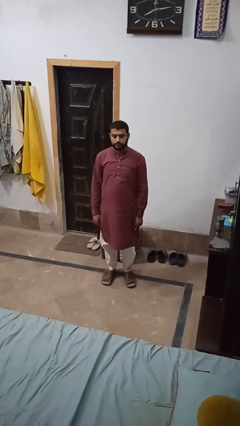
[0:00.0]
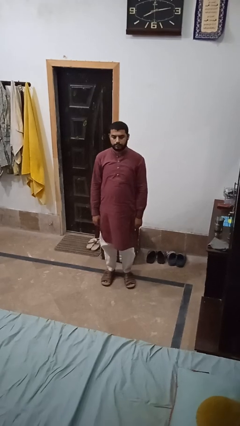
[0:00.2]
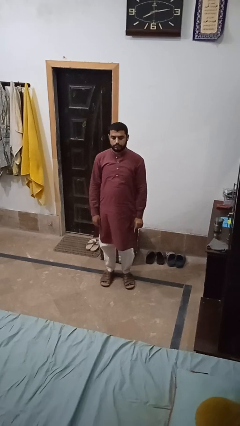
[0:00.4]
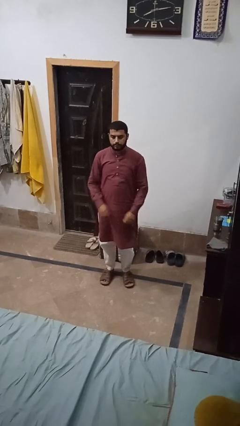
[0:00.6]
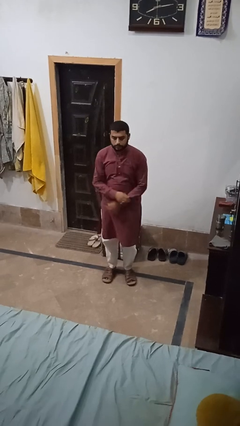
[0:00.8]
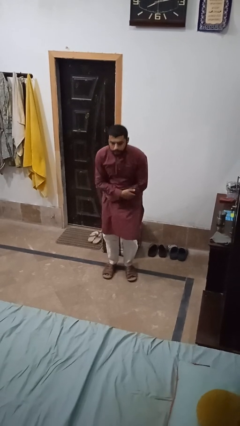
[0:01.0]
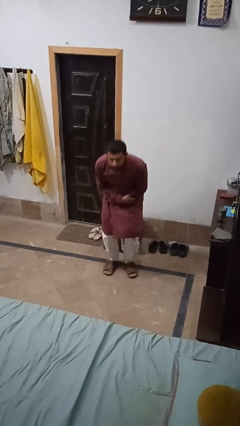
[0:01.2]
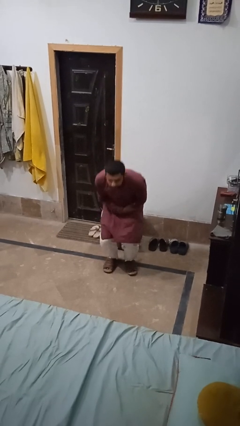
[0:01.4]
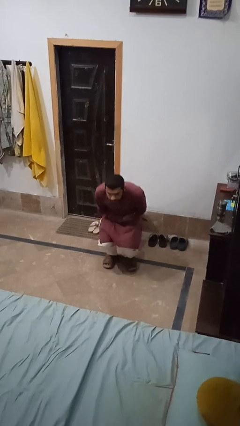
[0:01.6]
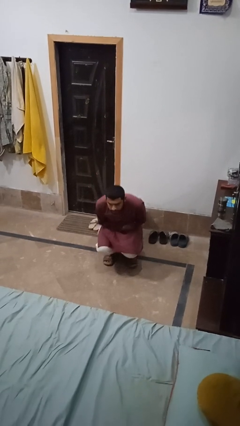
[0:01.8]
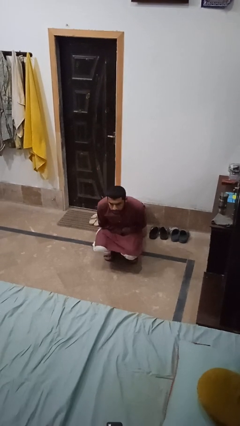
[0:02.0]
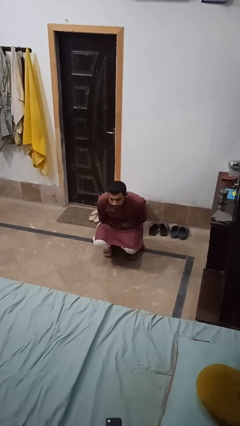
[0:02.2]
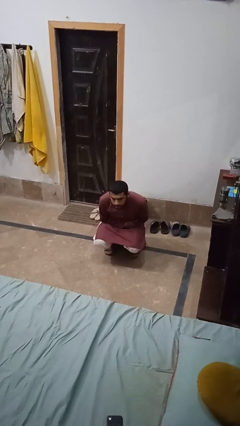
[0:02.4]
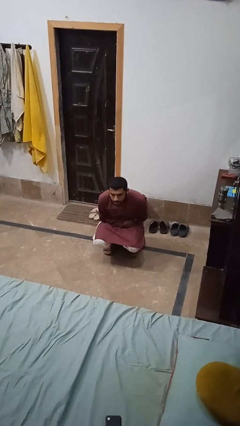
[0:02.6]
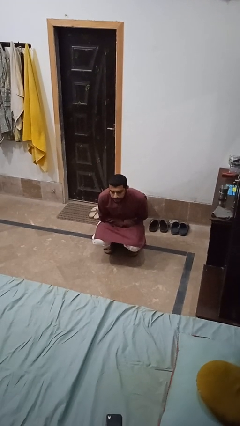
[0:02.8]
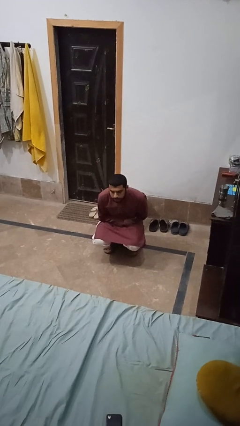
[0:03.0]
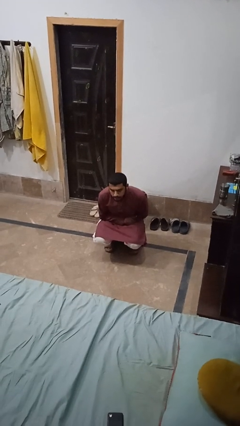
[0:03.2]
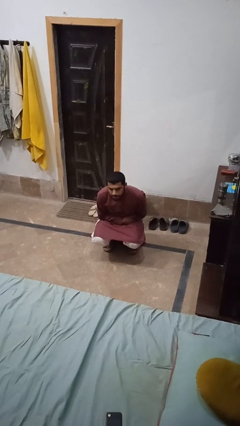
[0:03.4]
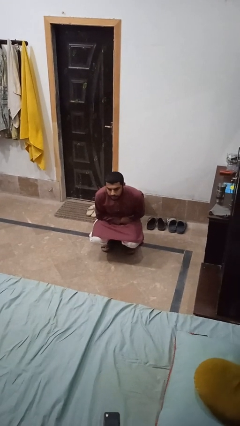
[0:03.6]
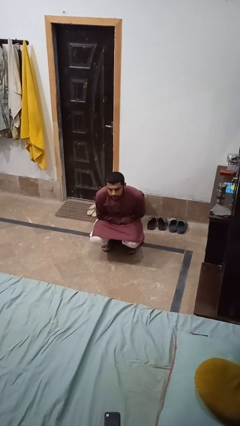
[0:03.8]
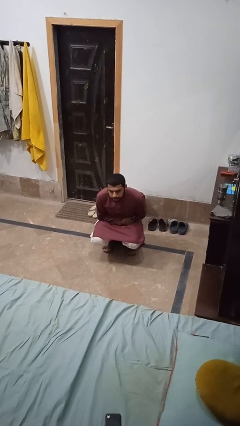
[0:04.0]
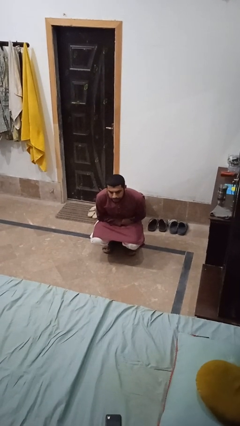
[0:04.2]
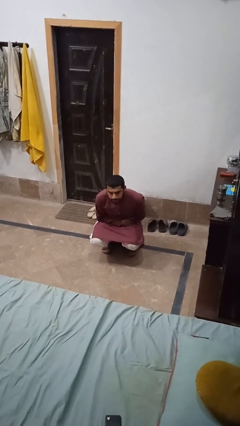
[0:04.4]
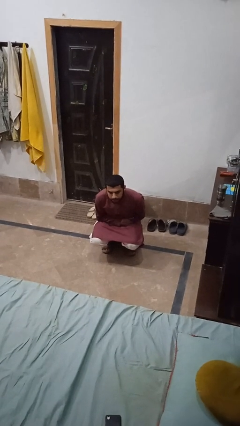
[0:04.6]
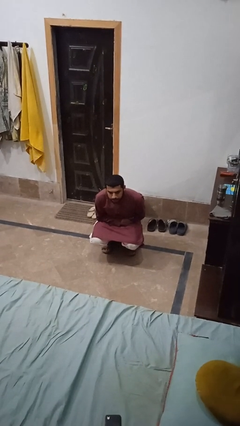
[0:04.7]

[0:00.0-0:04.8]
person squats

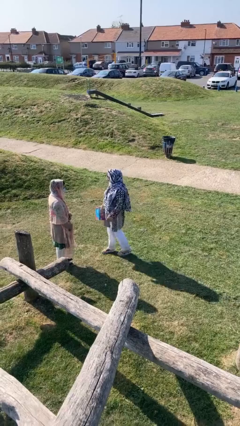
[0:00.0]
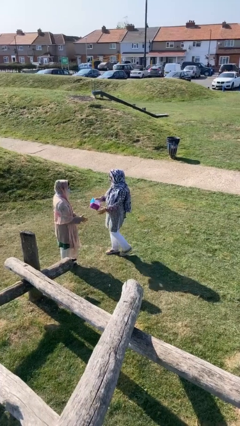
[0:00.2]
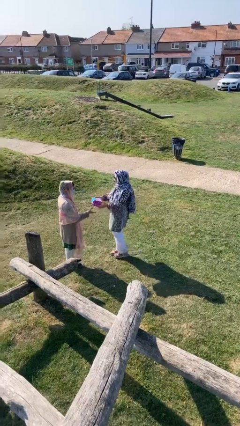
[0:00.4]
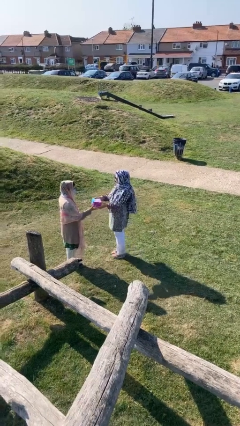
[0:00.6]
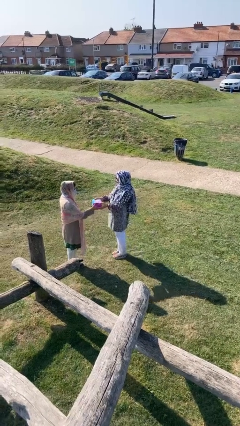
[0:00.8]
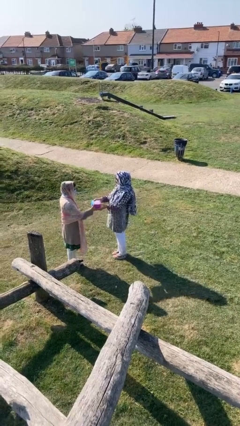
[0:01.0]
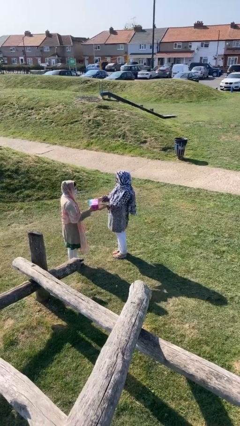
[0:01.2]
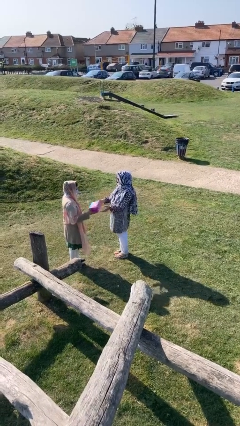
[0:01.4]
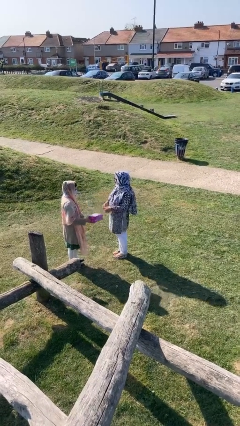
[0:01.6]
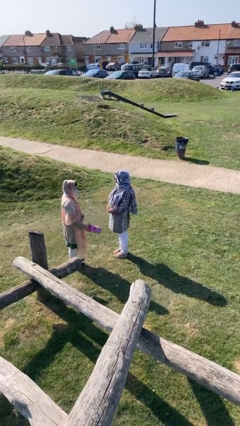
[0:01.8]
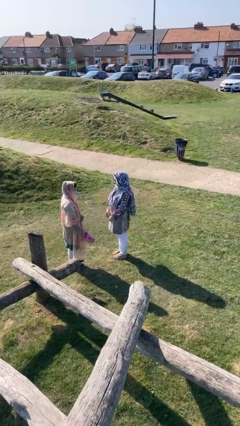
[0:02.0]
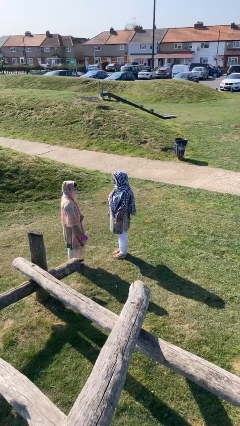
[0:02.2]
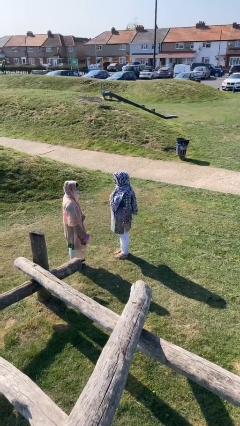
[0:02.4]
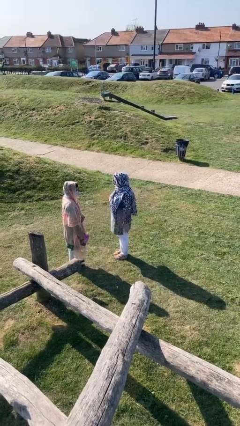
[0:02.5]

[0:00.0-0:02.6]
person transfers object to person

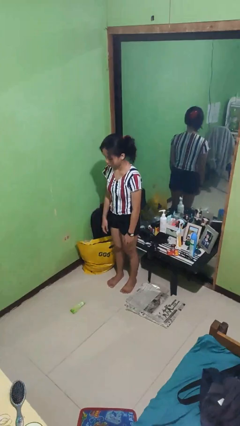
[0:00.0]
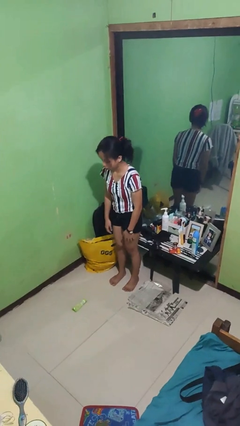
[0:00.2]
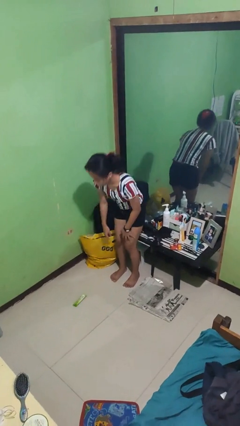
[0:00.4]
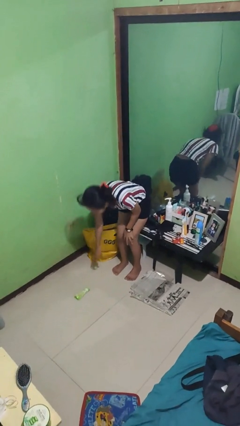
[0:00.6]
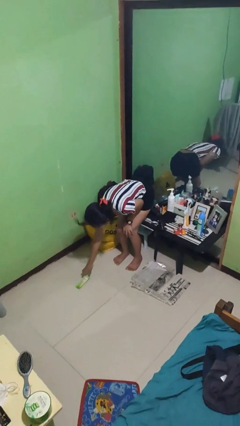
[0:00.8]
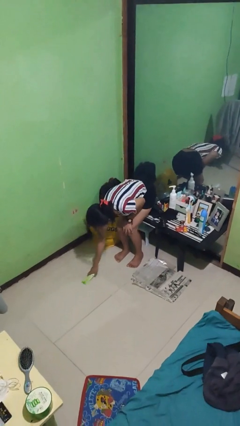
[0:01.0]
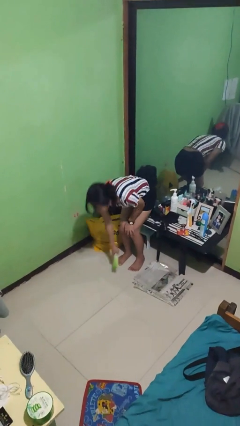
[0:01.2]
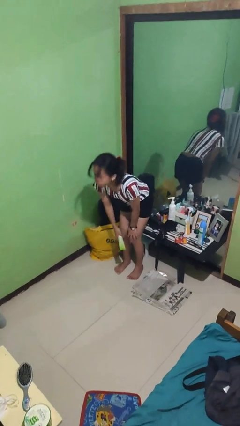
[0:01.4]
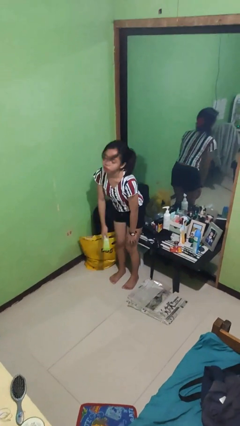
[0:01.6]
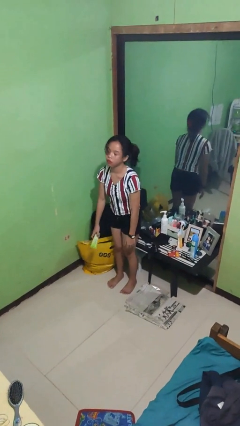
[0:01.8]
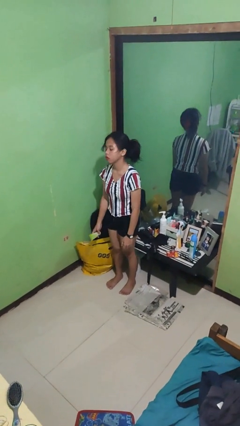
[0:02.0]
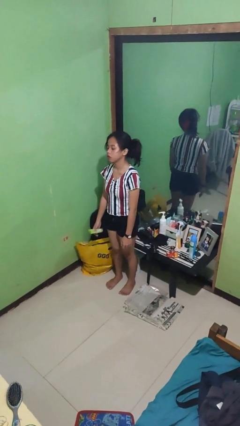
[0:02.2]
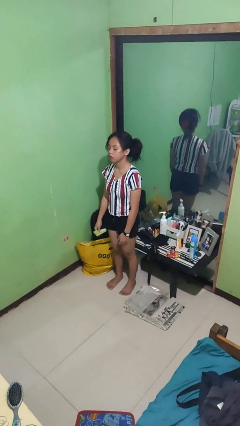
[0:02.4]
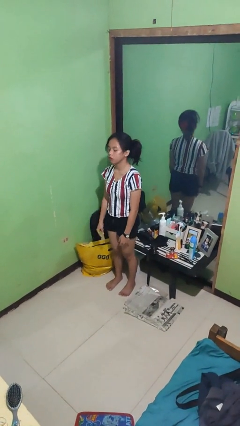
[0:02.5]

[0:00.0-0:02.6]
person picks up object from floor

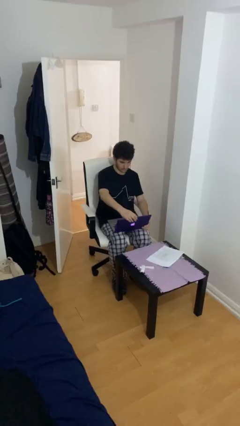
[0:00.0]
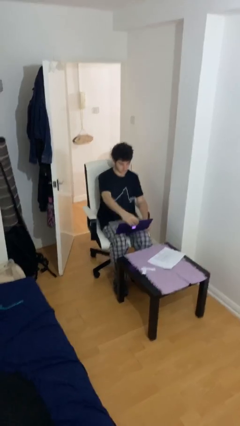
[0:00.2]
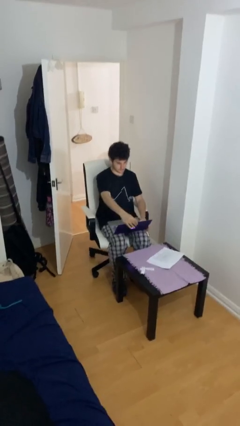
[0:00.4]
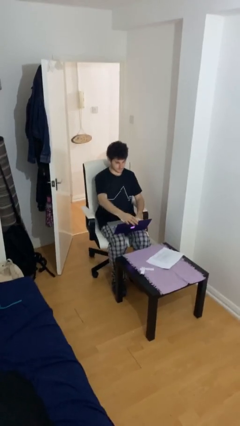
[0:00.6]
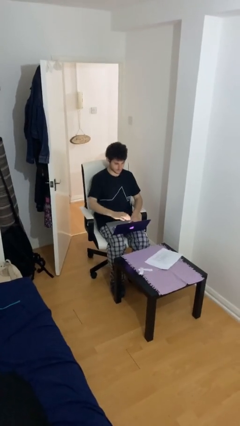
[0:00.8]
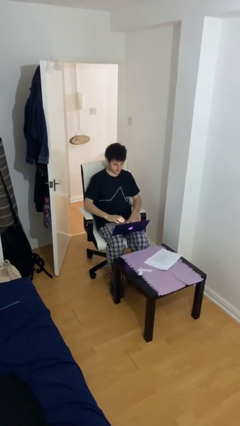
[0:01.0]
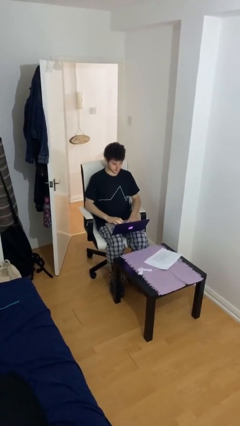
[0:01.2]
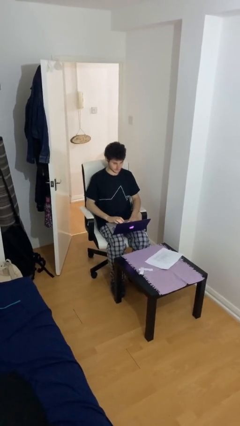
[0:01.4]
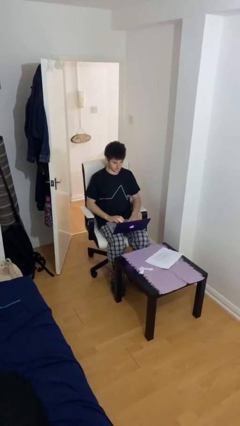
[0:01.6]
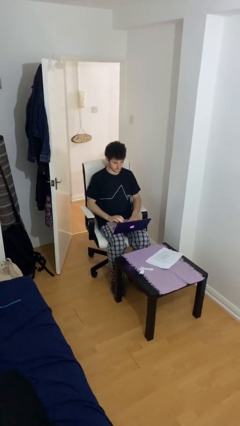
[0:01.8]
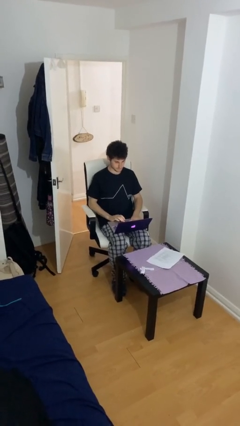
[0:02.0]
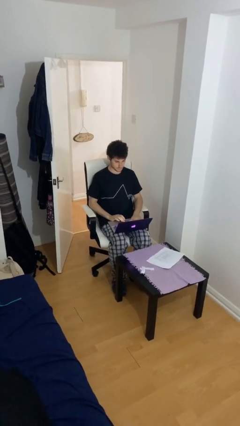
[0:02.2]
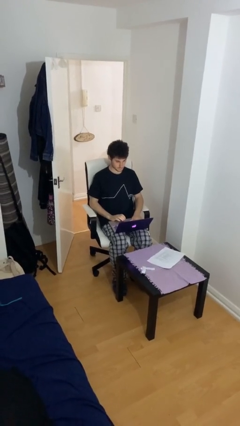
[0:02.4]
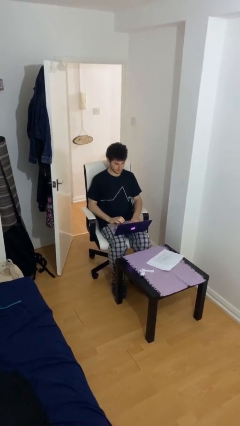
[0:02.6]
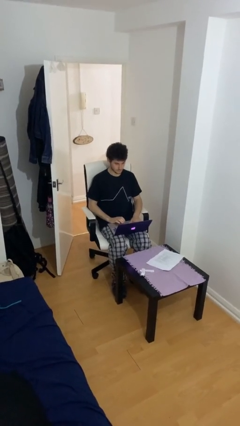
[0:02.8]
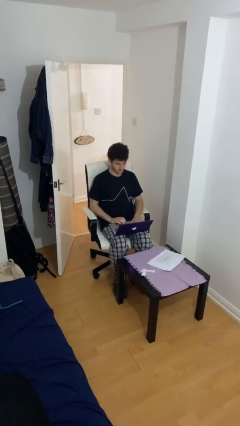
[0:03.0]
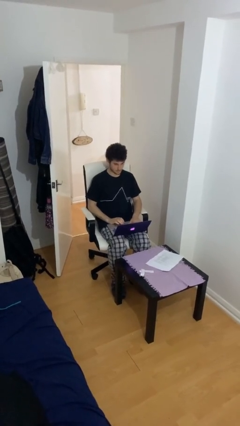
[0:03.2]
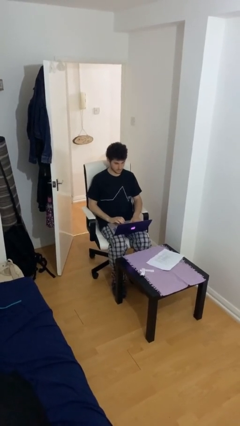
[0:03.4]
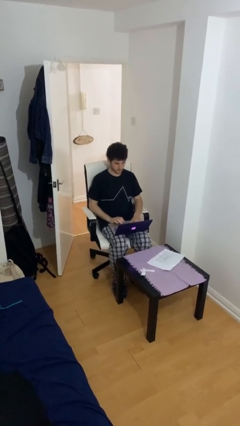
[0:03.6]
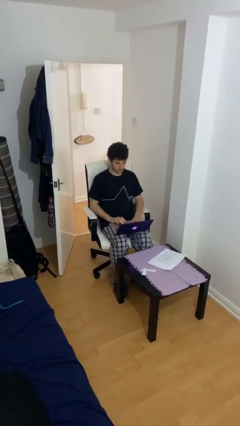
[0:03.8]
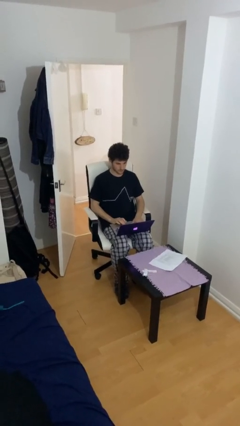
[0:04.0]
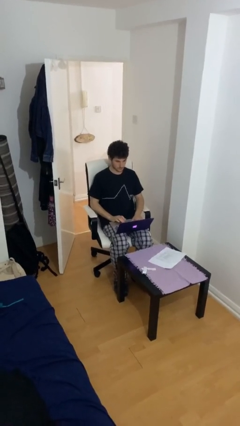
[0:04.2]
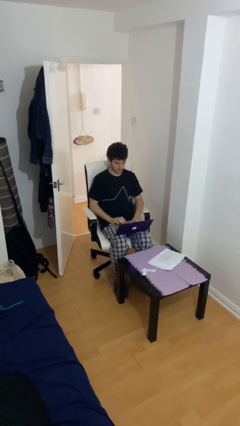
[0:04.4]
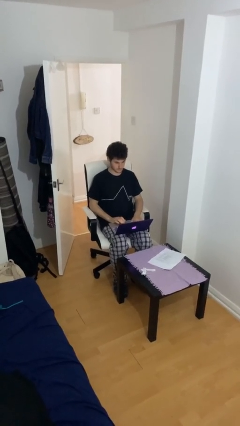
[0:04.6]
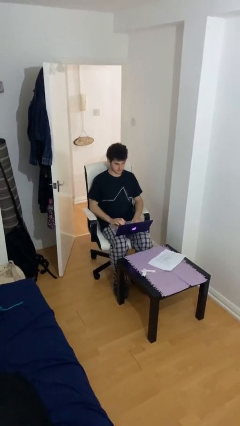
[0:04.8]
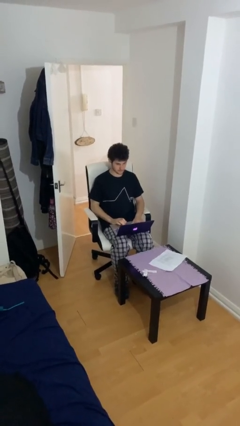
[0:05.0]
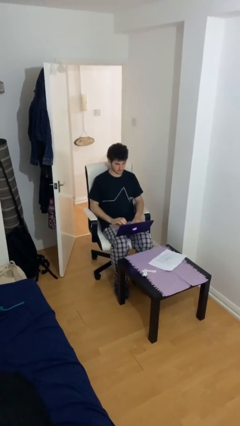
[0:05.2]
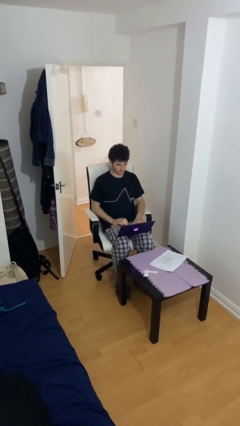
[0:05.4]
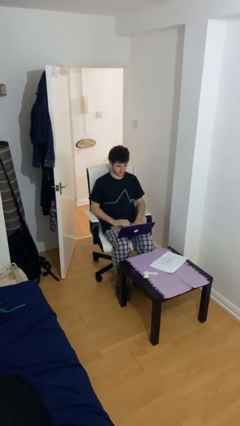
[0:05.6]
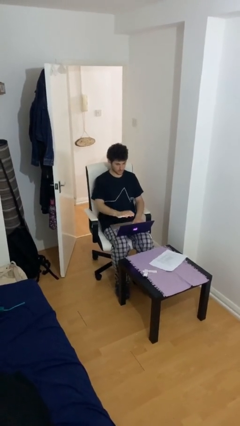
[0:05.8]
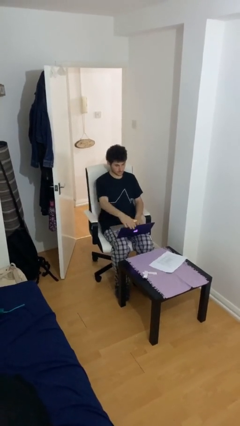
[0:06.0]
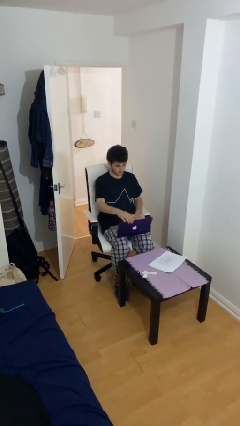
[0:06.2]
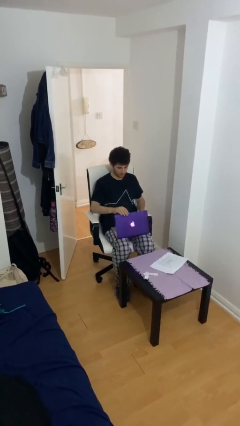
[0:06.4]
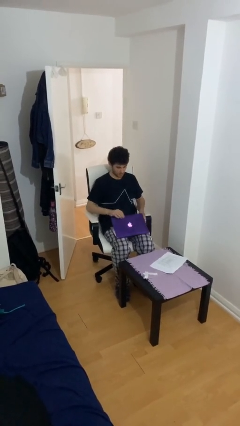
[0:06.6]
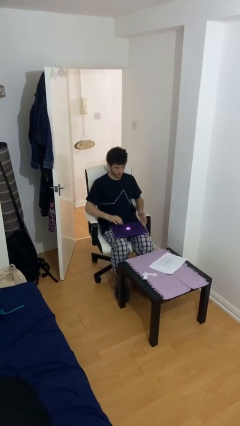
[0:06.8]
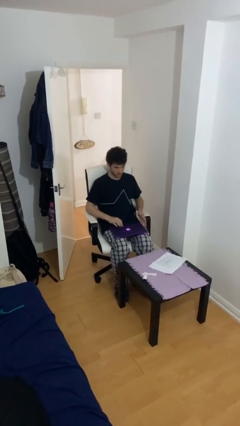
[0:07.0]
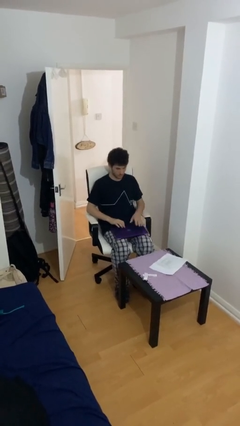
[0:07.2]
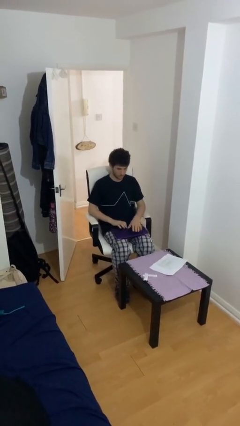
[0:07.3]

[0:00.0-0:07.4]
person interacts with laptop

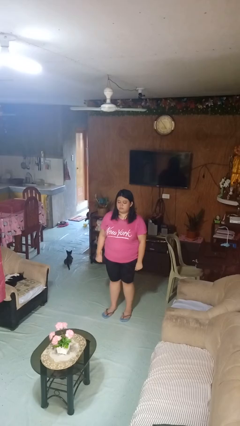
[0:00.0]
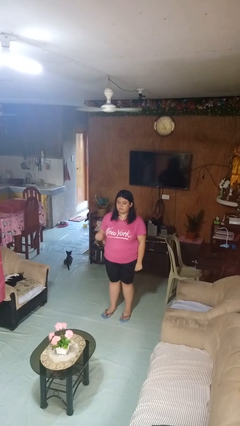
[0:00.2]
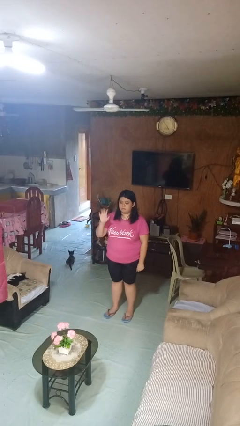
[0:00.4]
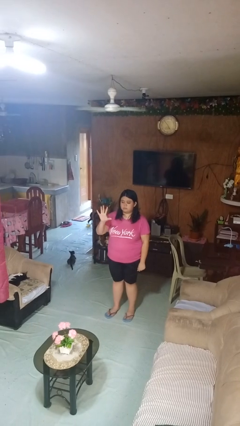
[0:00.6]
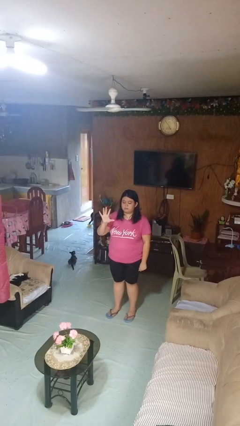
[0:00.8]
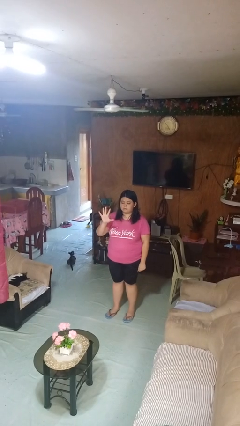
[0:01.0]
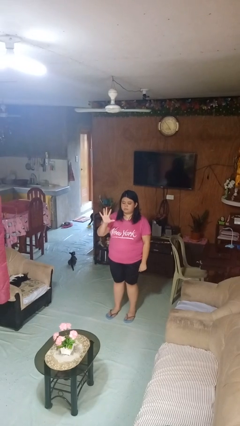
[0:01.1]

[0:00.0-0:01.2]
person gestures number five
